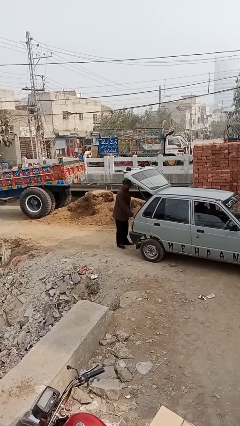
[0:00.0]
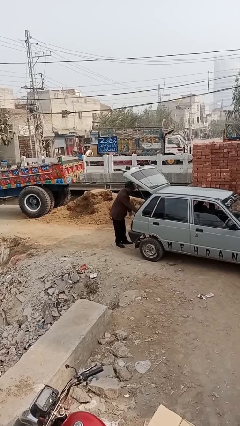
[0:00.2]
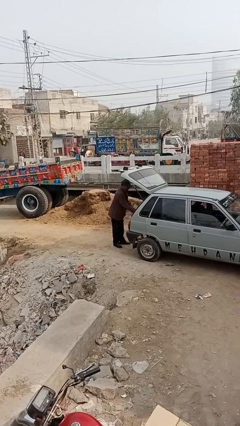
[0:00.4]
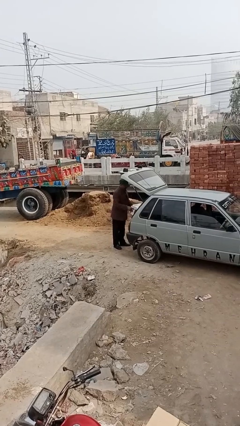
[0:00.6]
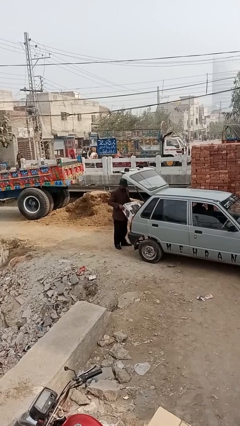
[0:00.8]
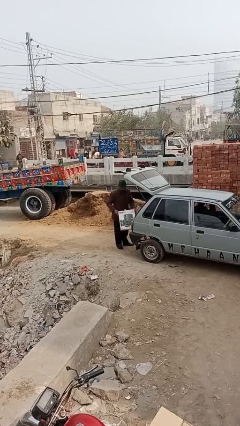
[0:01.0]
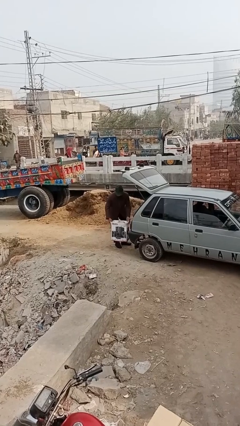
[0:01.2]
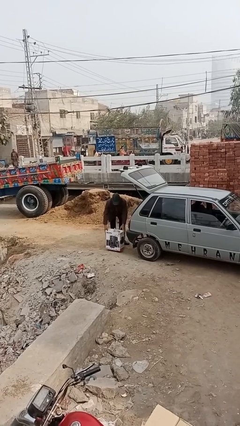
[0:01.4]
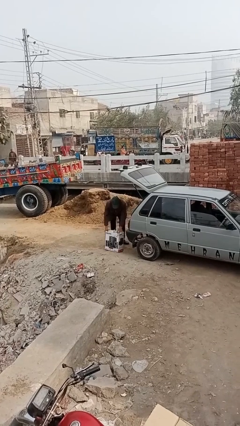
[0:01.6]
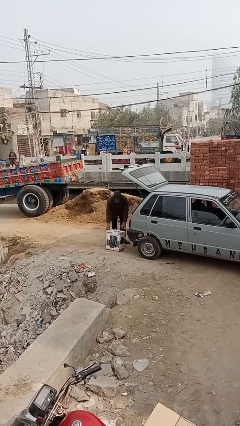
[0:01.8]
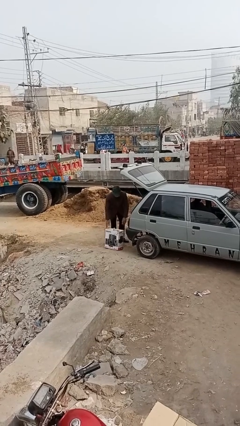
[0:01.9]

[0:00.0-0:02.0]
person unloads car

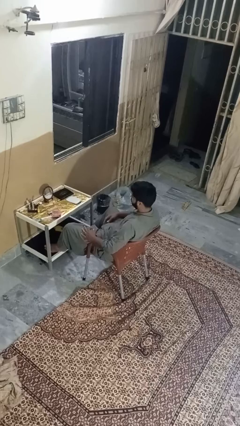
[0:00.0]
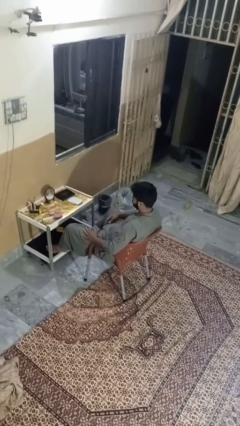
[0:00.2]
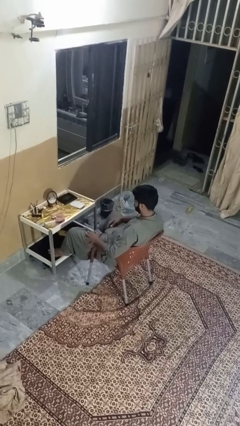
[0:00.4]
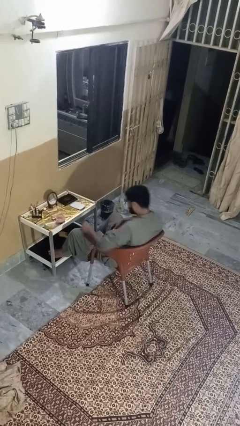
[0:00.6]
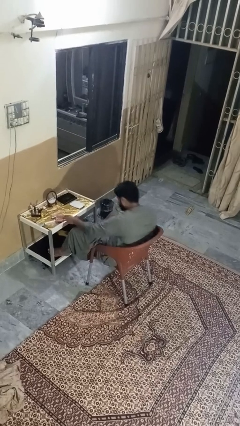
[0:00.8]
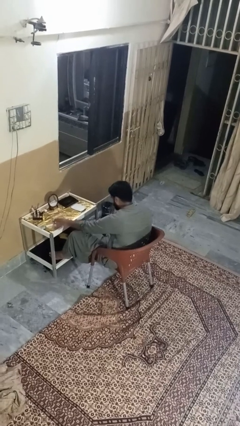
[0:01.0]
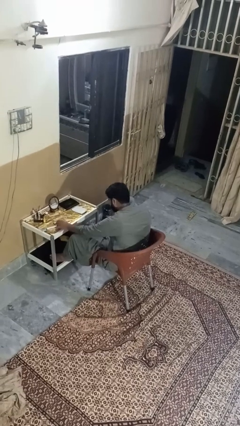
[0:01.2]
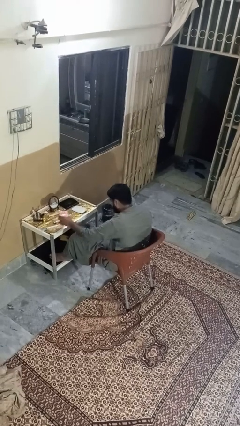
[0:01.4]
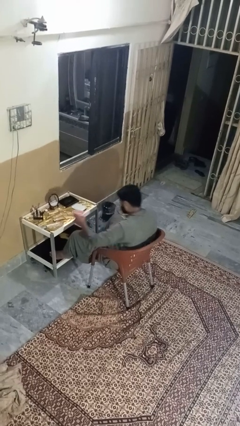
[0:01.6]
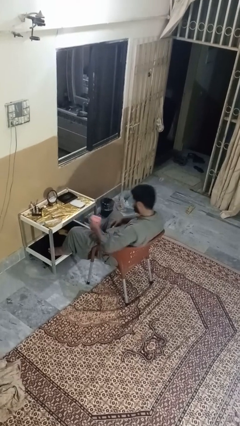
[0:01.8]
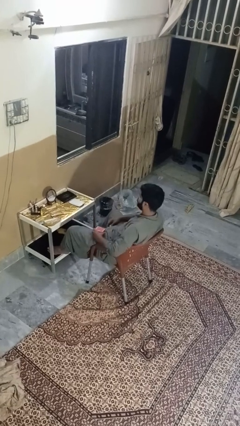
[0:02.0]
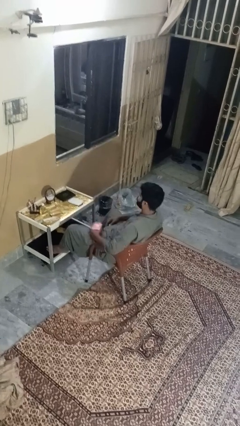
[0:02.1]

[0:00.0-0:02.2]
person picks up object from table

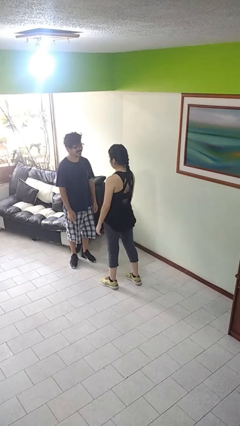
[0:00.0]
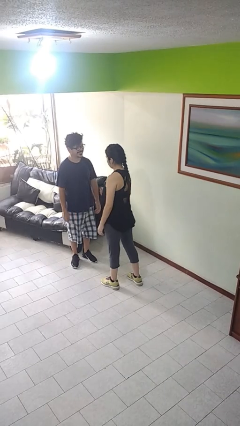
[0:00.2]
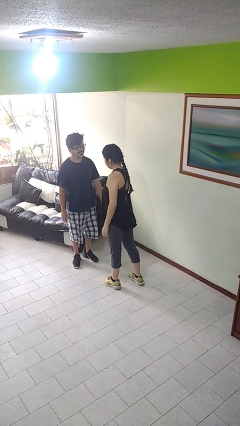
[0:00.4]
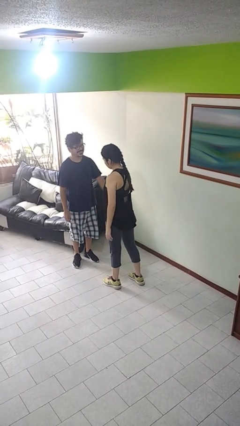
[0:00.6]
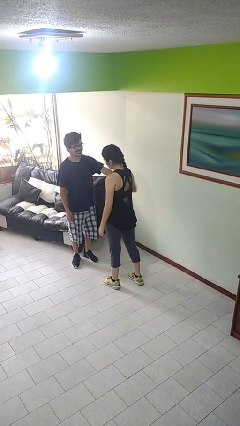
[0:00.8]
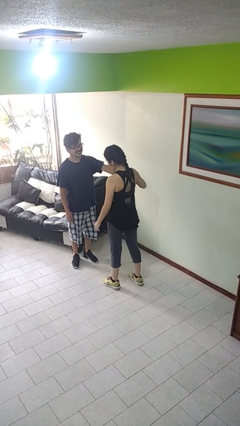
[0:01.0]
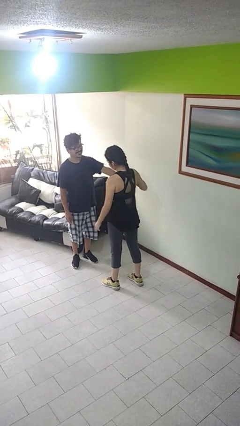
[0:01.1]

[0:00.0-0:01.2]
person grabs person by forearm

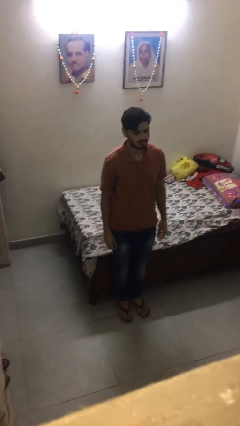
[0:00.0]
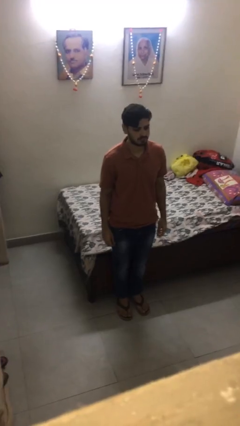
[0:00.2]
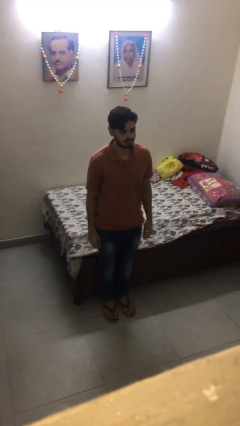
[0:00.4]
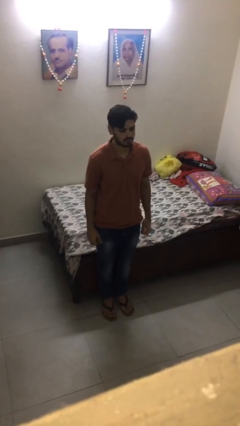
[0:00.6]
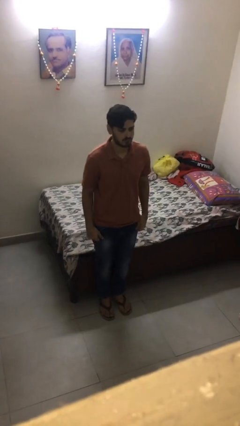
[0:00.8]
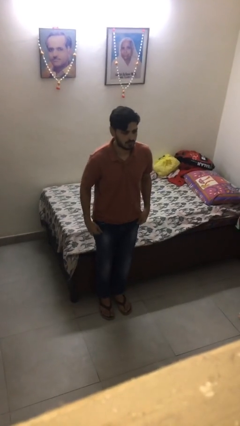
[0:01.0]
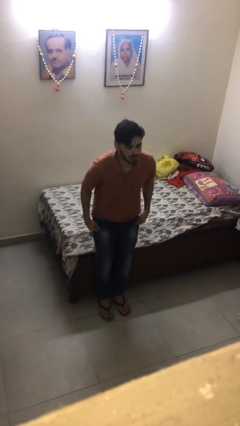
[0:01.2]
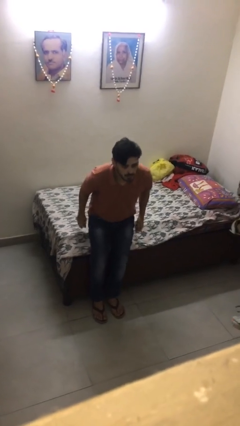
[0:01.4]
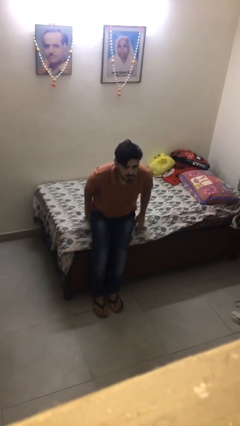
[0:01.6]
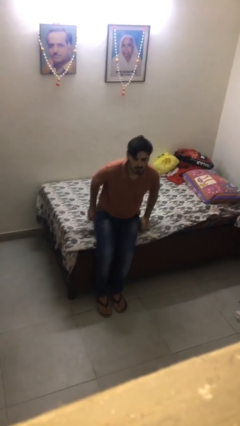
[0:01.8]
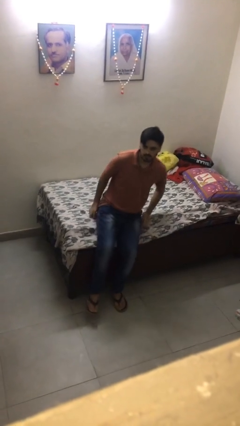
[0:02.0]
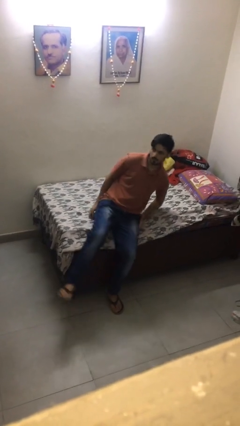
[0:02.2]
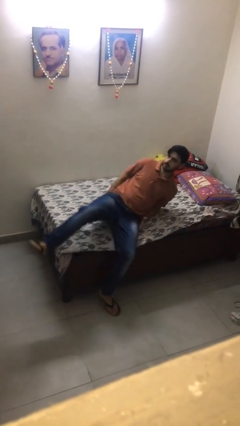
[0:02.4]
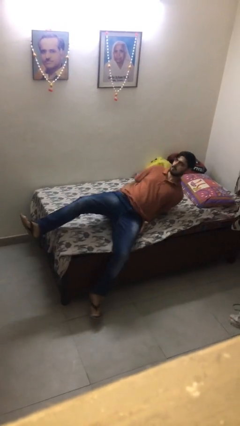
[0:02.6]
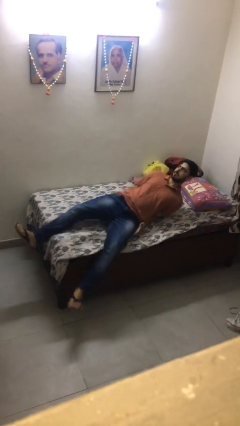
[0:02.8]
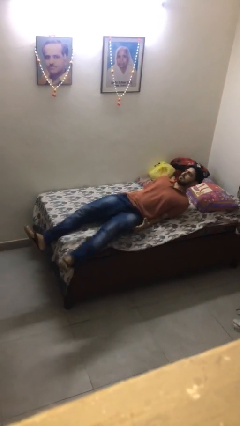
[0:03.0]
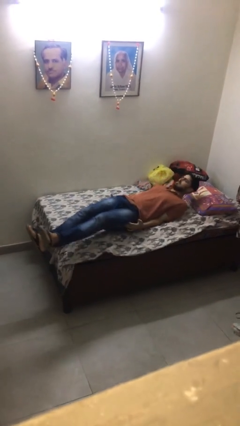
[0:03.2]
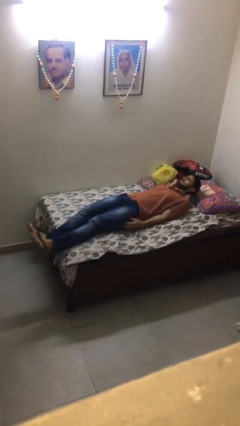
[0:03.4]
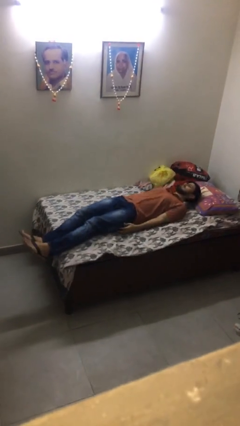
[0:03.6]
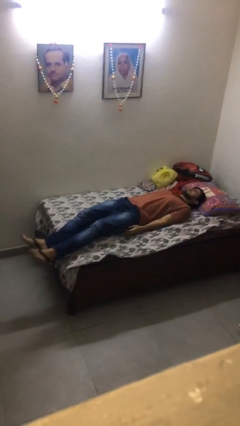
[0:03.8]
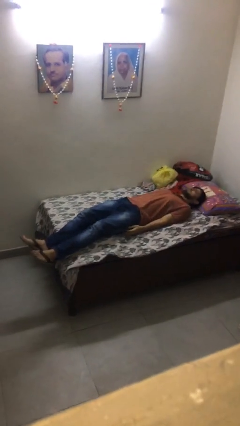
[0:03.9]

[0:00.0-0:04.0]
person lies down on bed

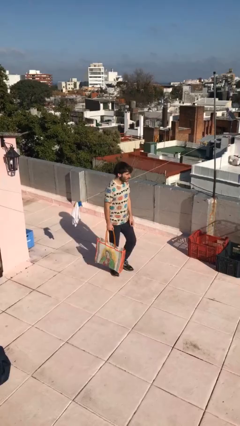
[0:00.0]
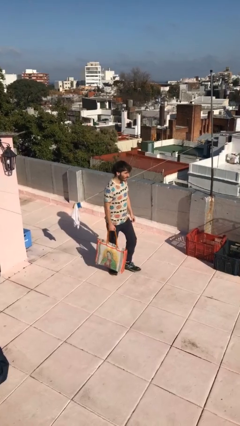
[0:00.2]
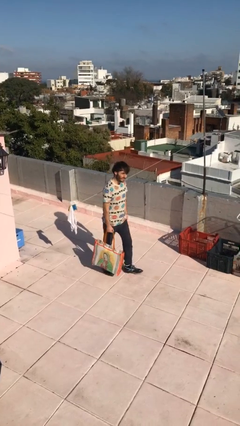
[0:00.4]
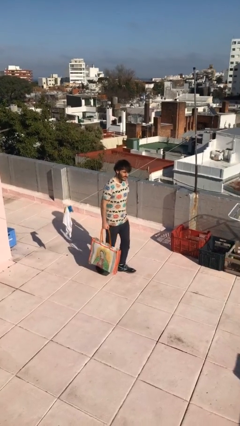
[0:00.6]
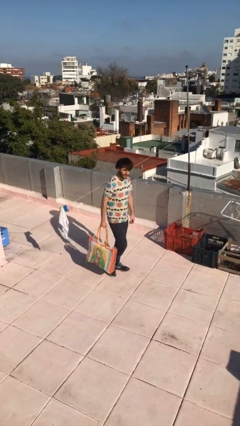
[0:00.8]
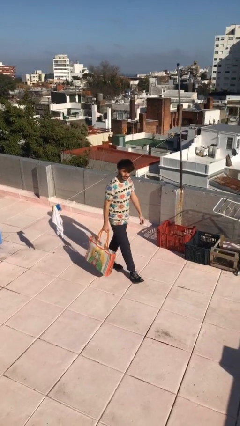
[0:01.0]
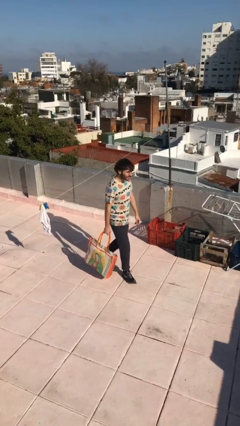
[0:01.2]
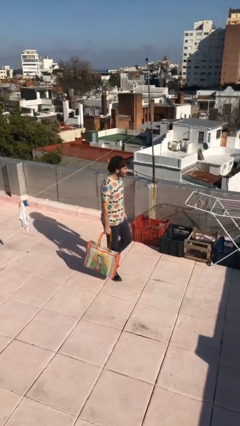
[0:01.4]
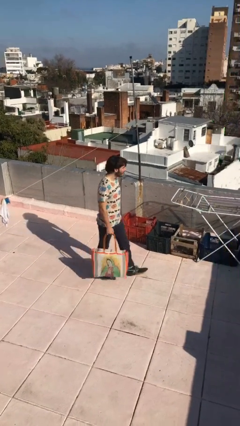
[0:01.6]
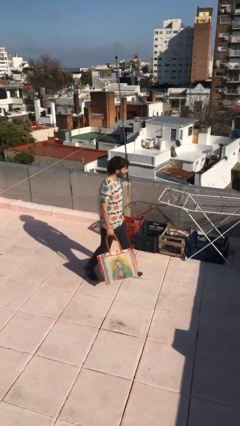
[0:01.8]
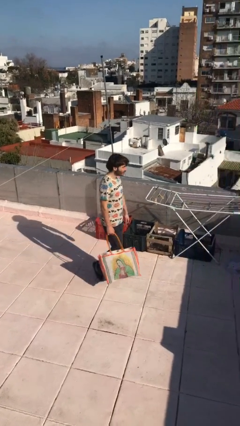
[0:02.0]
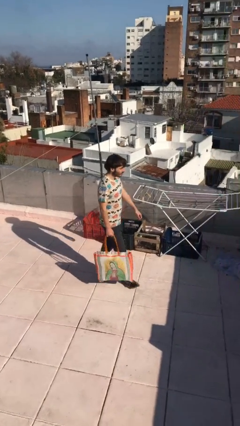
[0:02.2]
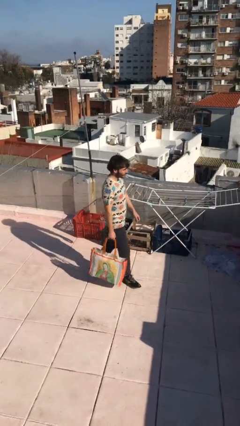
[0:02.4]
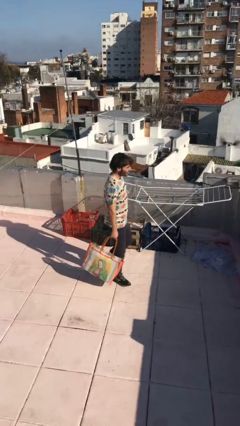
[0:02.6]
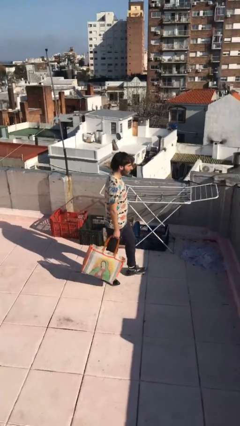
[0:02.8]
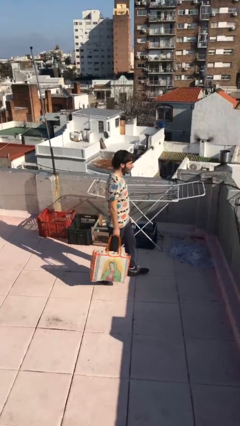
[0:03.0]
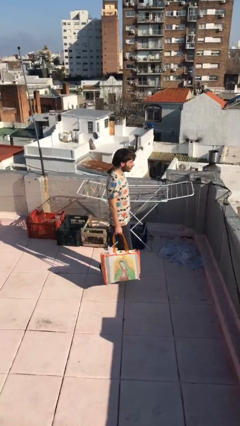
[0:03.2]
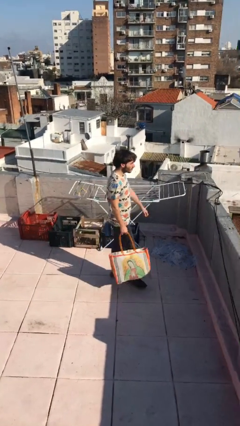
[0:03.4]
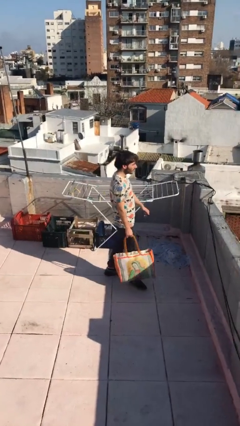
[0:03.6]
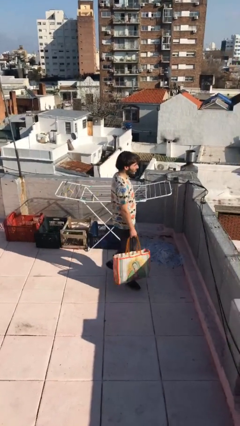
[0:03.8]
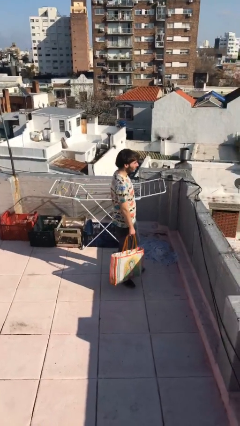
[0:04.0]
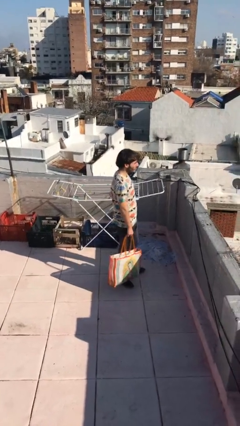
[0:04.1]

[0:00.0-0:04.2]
person carries groceries

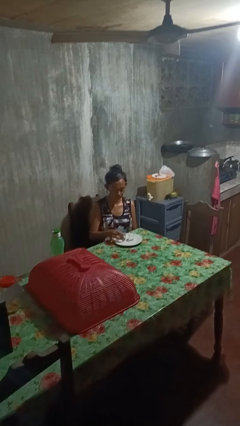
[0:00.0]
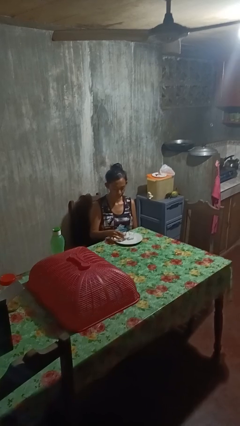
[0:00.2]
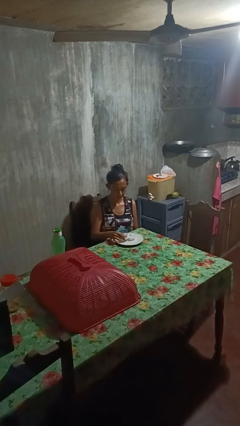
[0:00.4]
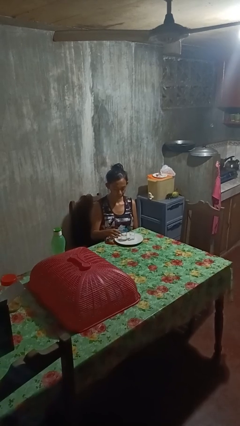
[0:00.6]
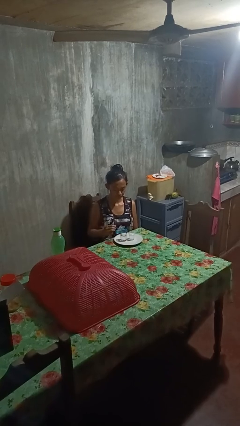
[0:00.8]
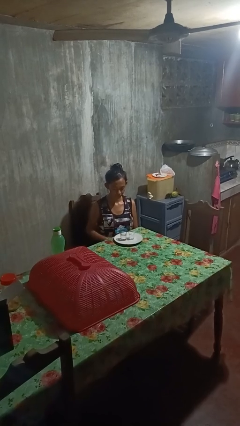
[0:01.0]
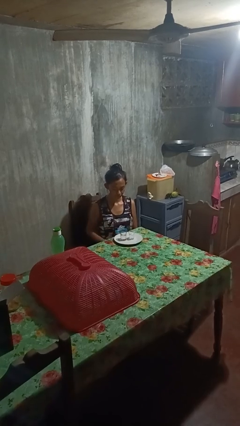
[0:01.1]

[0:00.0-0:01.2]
person puts down object on table

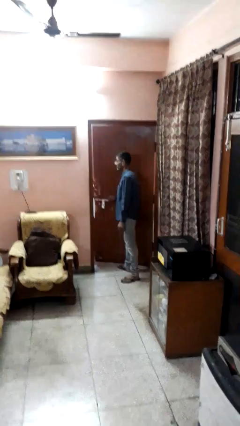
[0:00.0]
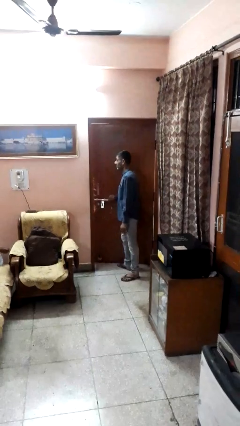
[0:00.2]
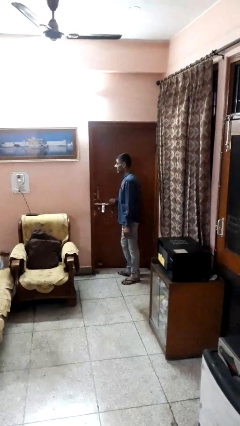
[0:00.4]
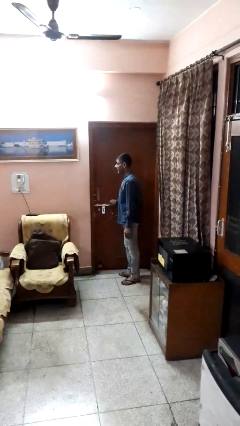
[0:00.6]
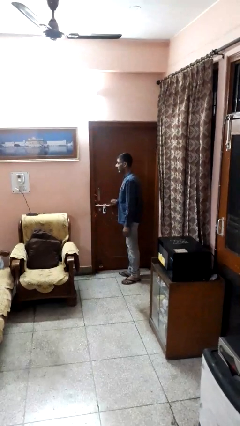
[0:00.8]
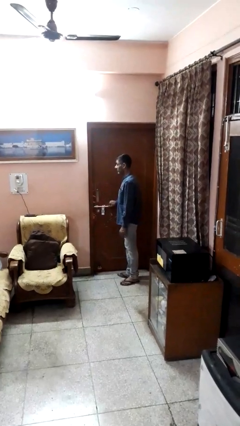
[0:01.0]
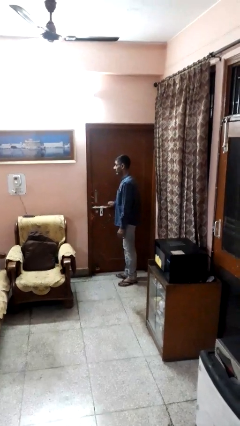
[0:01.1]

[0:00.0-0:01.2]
person closes facility door

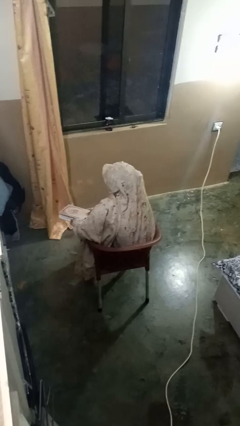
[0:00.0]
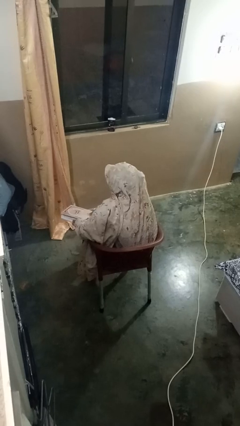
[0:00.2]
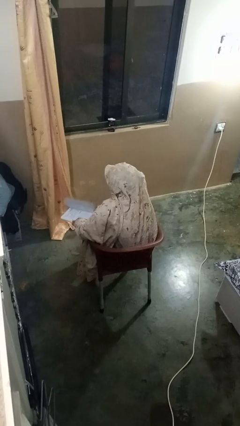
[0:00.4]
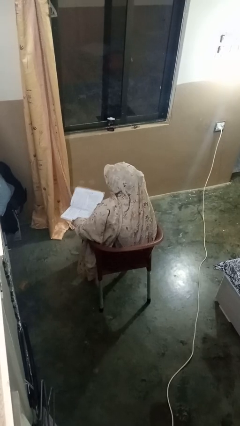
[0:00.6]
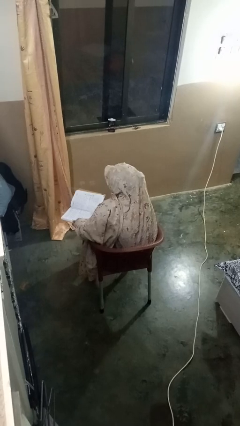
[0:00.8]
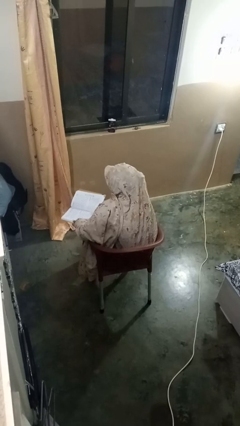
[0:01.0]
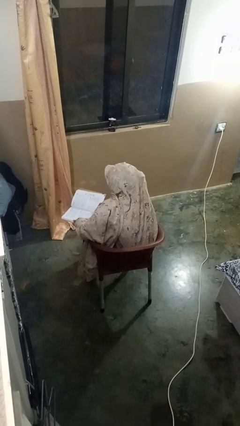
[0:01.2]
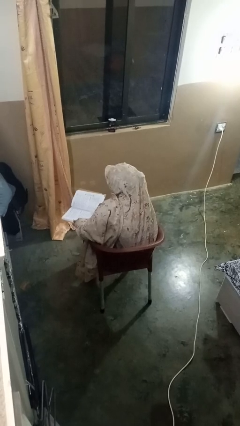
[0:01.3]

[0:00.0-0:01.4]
person reads book
